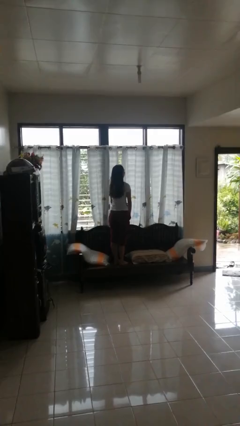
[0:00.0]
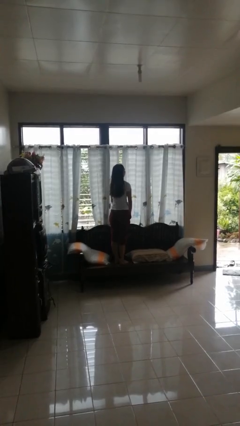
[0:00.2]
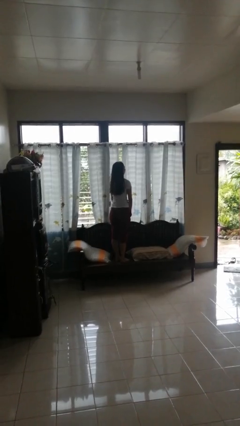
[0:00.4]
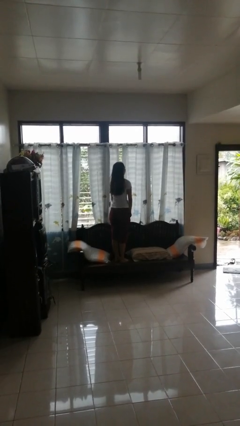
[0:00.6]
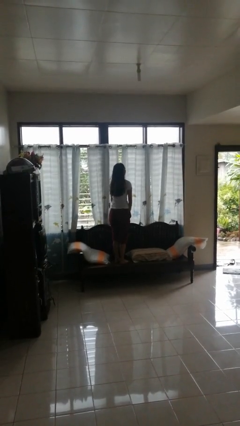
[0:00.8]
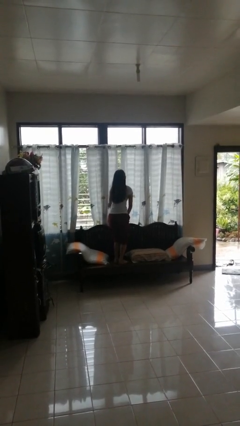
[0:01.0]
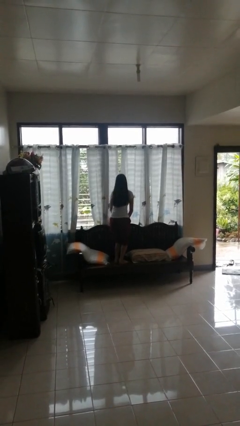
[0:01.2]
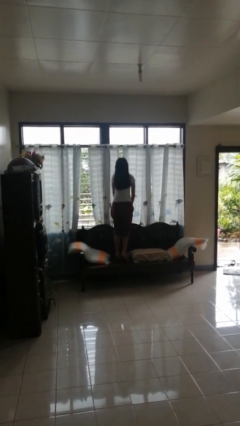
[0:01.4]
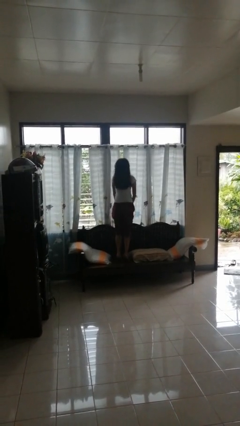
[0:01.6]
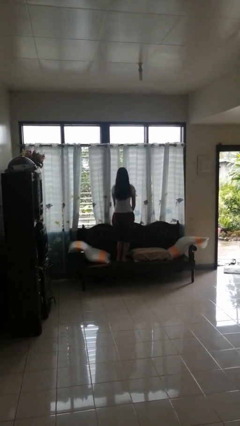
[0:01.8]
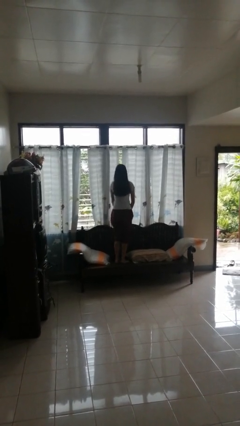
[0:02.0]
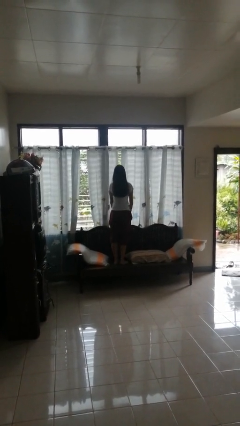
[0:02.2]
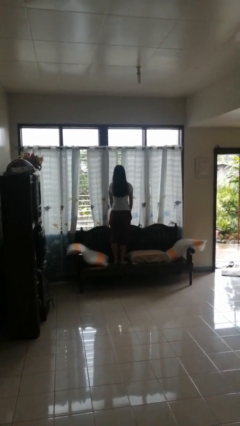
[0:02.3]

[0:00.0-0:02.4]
person jumps on couch

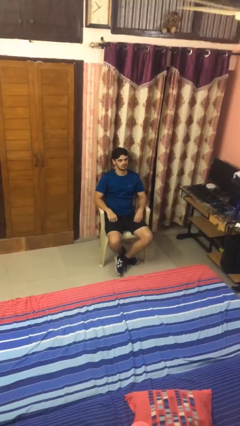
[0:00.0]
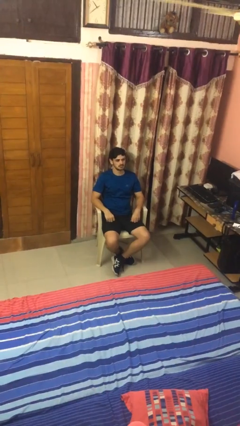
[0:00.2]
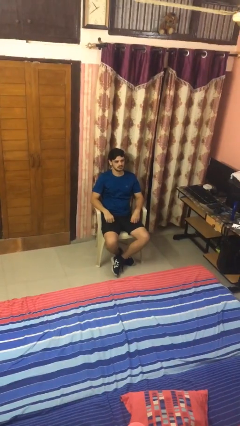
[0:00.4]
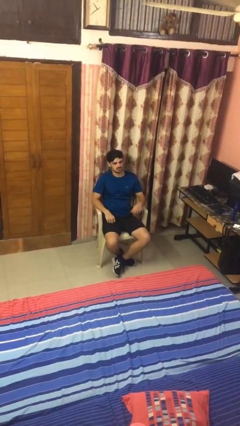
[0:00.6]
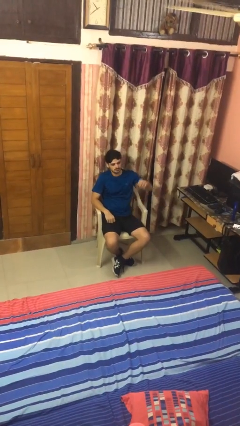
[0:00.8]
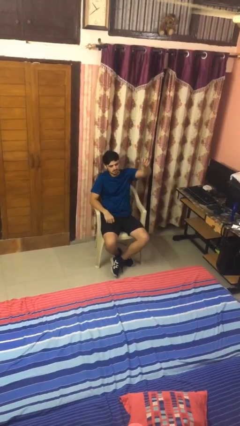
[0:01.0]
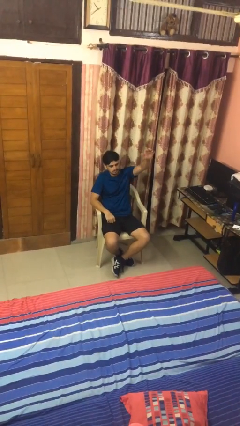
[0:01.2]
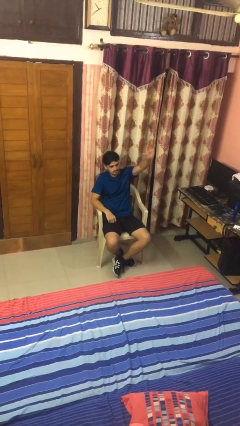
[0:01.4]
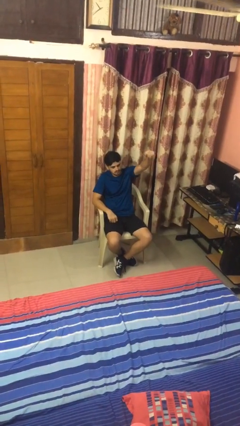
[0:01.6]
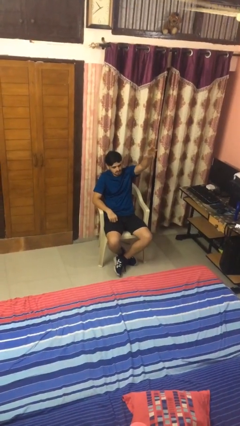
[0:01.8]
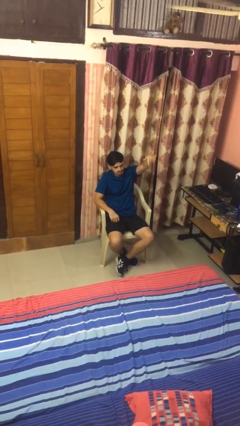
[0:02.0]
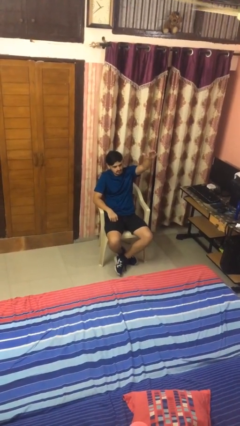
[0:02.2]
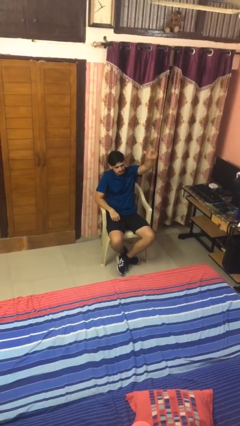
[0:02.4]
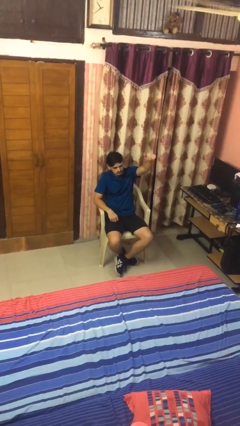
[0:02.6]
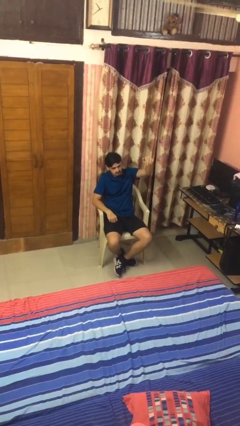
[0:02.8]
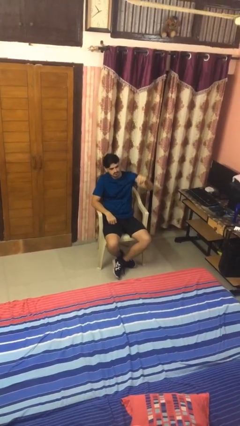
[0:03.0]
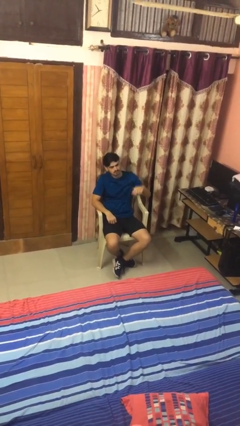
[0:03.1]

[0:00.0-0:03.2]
person gestures come here

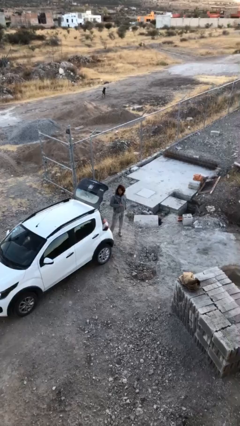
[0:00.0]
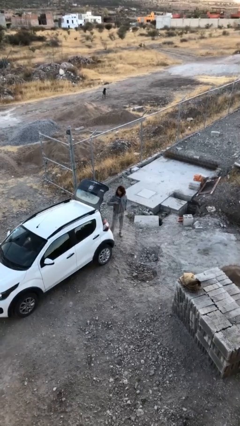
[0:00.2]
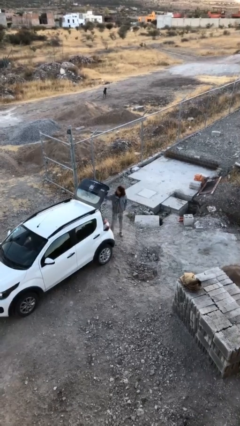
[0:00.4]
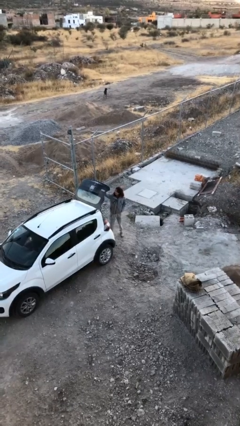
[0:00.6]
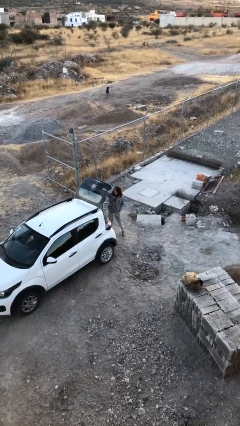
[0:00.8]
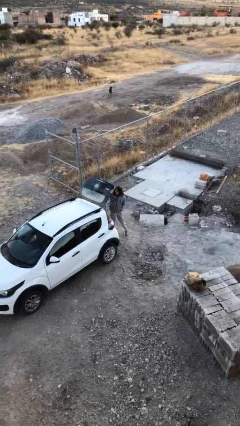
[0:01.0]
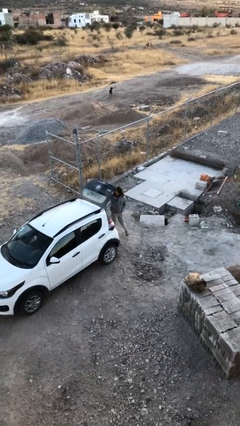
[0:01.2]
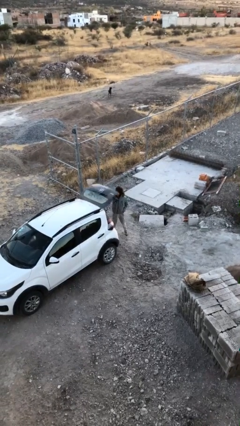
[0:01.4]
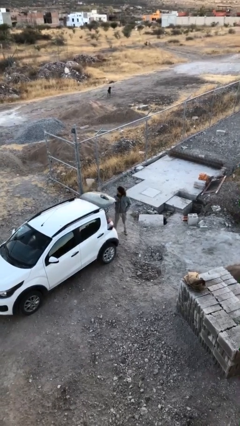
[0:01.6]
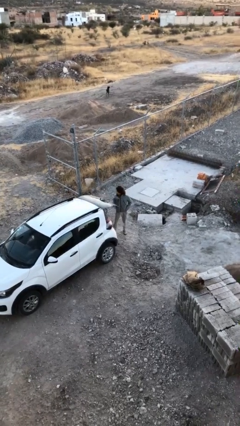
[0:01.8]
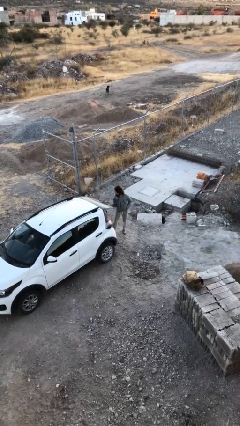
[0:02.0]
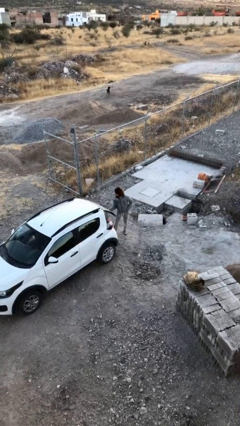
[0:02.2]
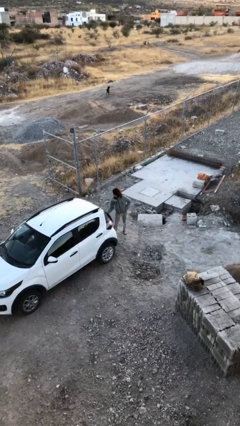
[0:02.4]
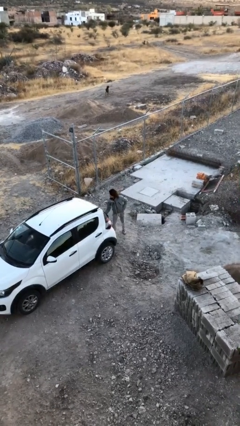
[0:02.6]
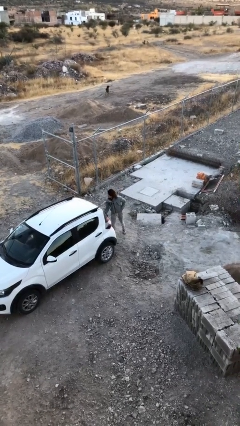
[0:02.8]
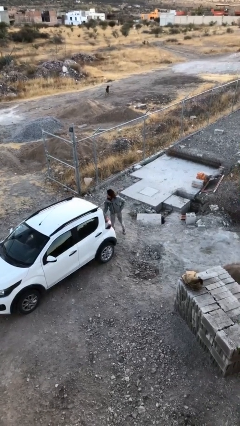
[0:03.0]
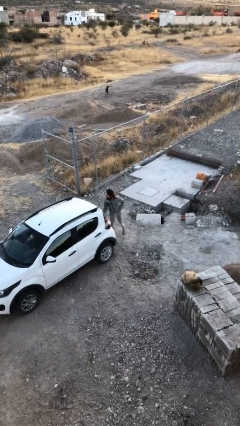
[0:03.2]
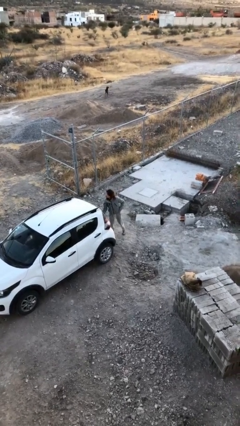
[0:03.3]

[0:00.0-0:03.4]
person closes car trunk

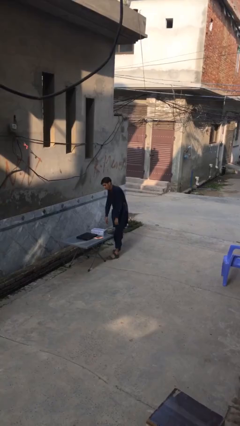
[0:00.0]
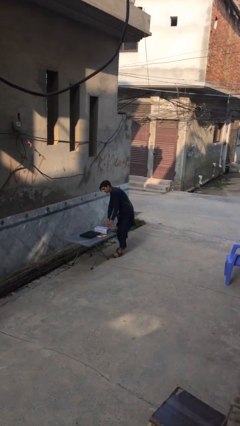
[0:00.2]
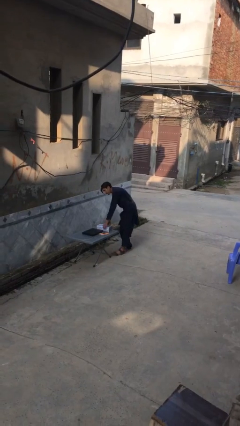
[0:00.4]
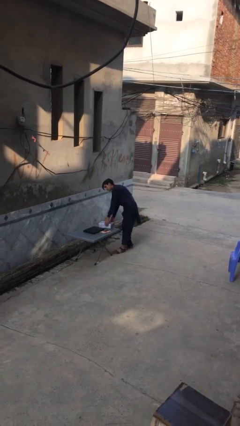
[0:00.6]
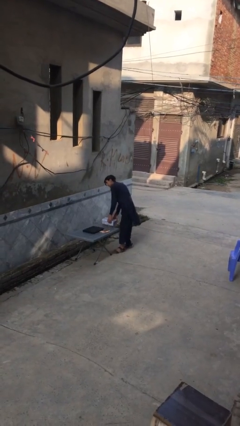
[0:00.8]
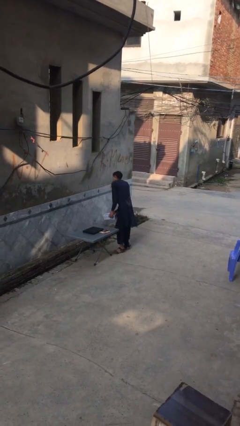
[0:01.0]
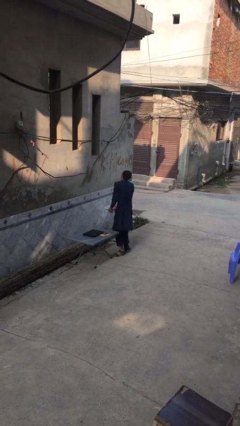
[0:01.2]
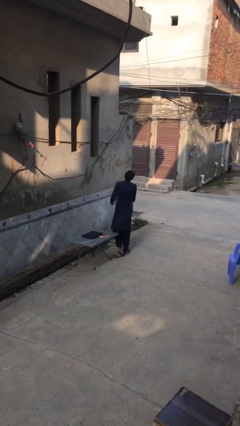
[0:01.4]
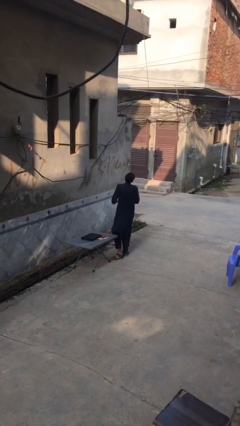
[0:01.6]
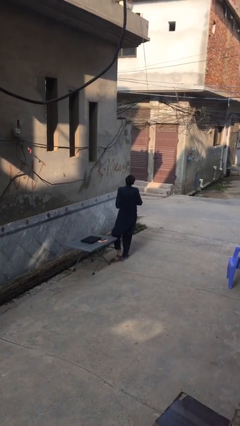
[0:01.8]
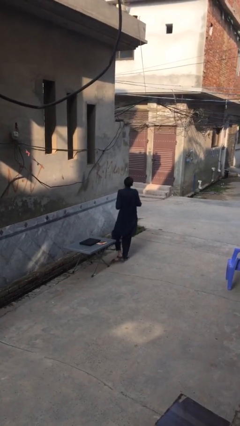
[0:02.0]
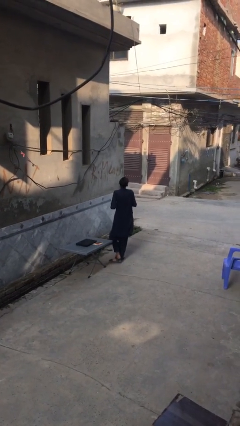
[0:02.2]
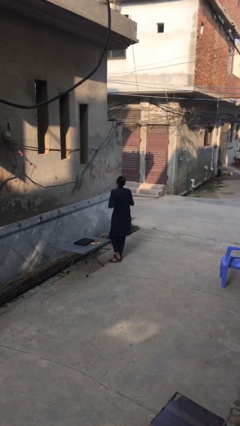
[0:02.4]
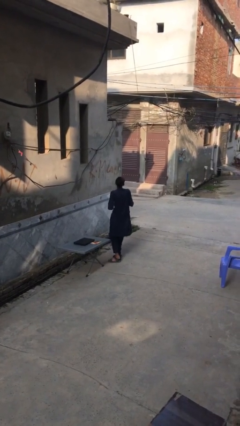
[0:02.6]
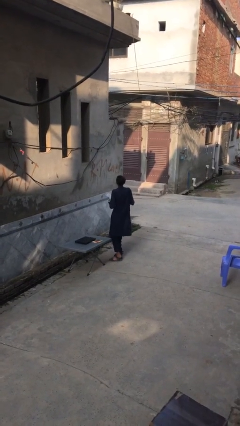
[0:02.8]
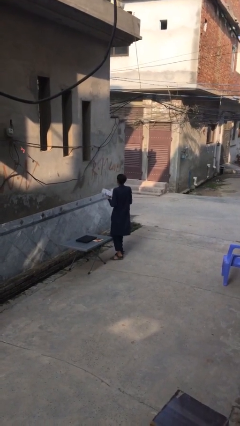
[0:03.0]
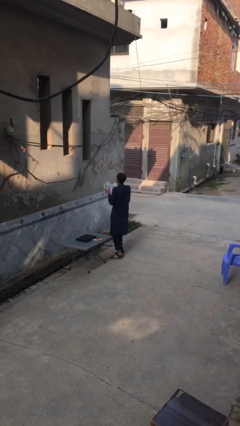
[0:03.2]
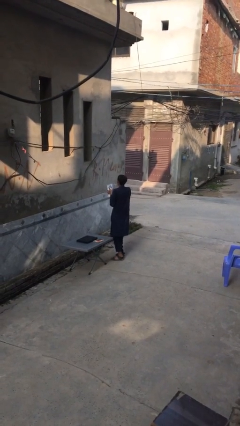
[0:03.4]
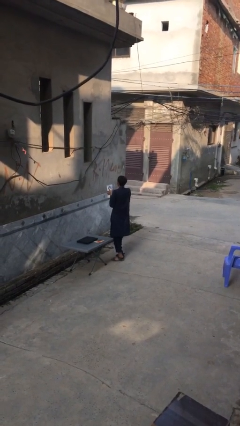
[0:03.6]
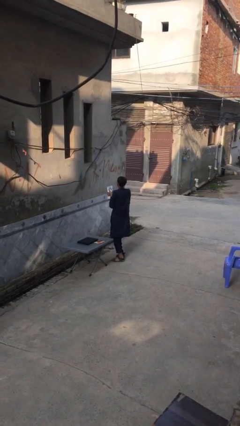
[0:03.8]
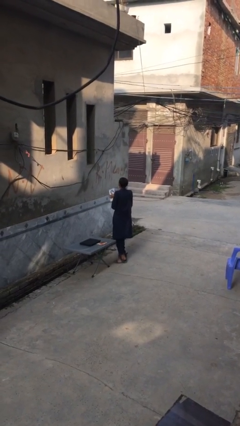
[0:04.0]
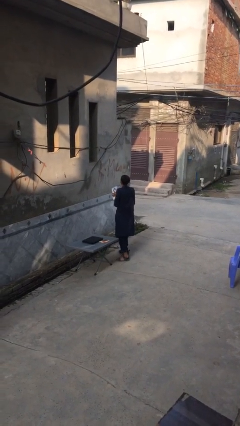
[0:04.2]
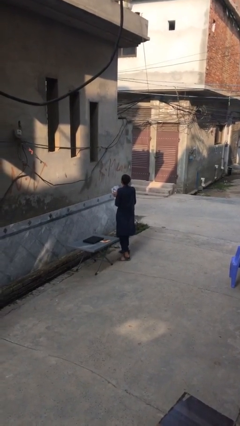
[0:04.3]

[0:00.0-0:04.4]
person picks up object from table

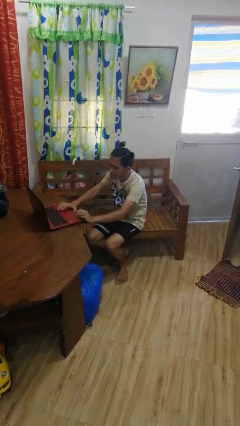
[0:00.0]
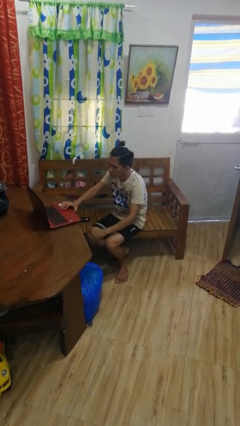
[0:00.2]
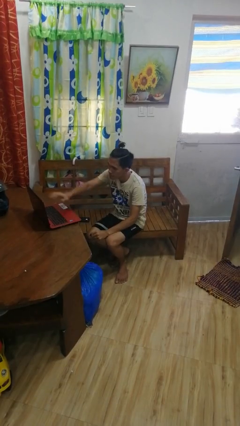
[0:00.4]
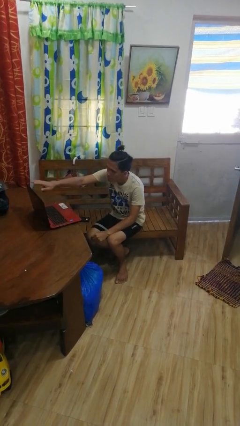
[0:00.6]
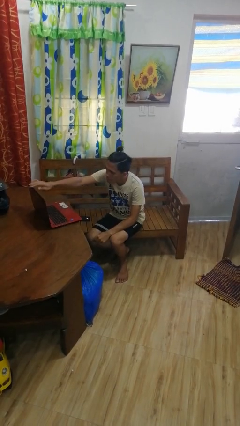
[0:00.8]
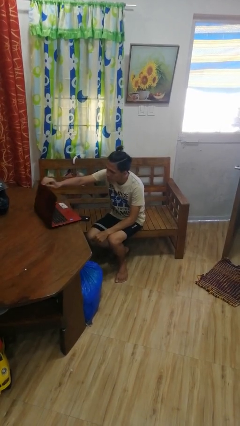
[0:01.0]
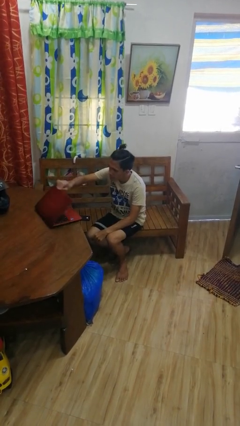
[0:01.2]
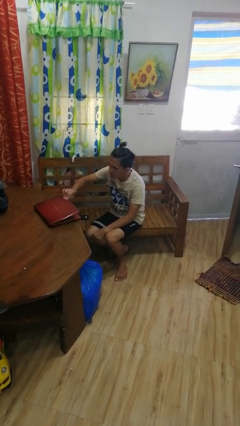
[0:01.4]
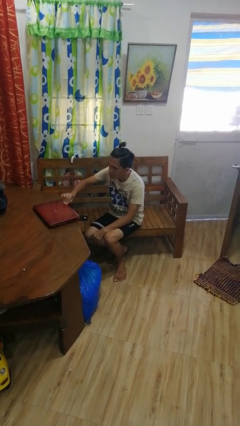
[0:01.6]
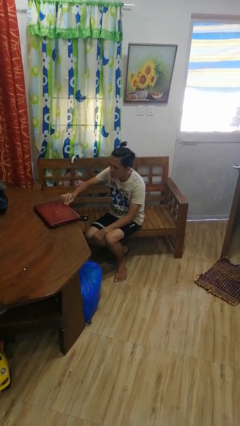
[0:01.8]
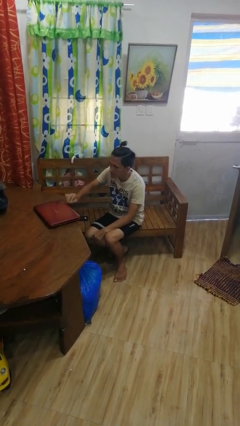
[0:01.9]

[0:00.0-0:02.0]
person closes laptop

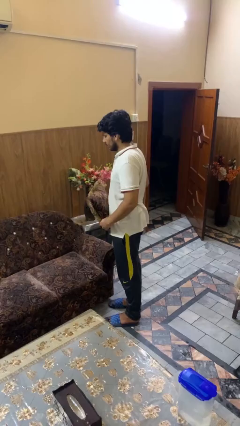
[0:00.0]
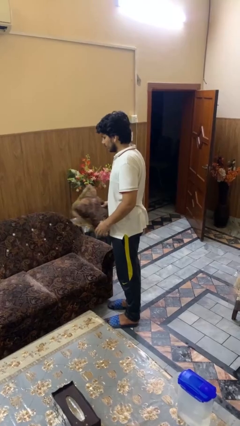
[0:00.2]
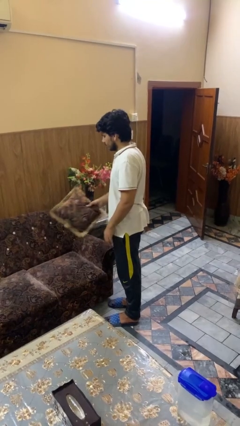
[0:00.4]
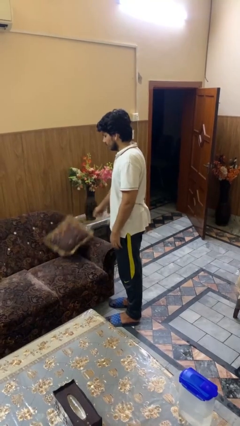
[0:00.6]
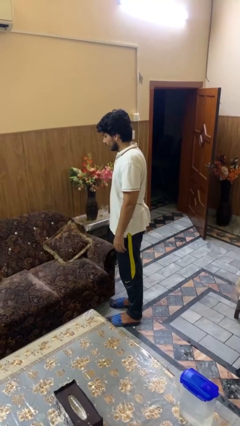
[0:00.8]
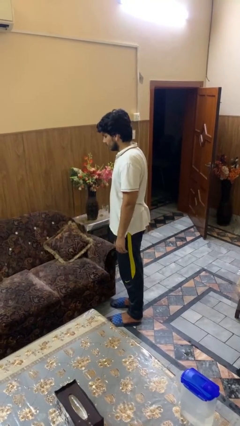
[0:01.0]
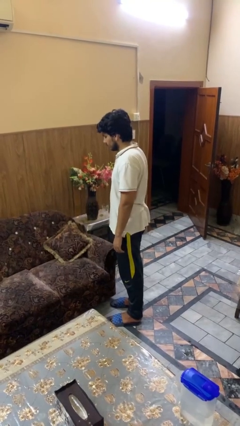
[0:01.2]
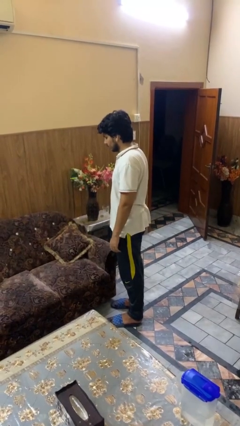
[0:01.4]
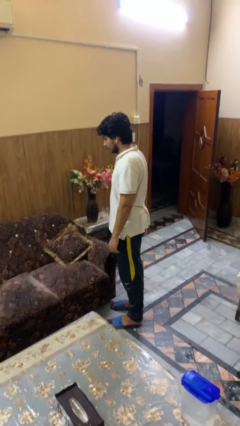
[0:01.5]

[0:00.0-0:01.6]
person puts down object on couch

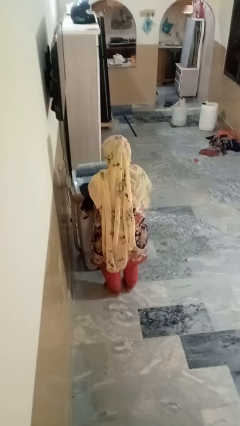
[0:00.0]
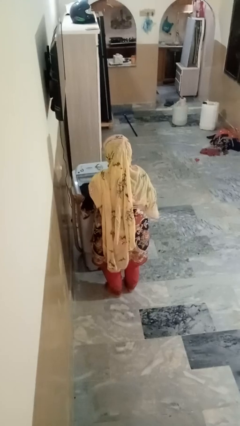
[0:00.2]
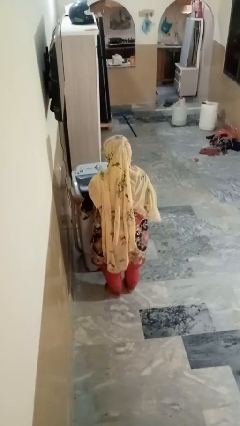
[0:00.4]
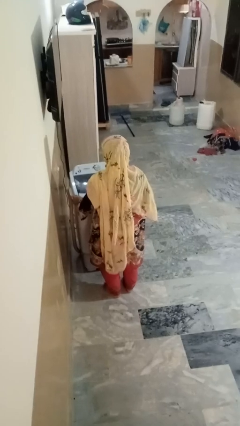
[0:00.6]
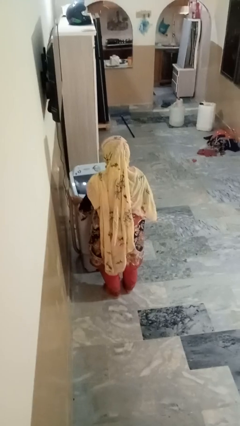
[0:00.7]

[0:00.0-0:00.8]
person closes clothes washer
